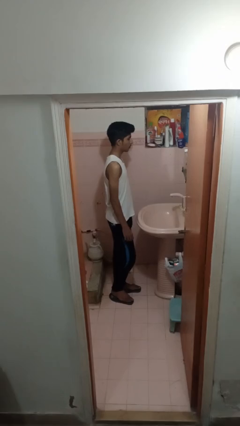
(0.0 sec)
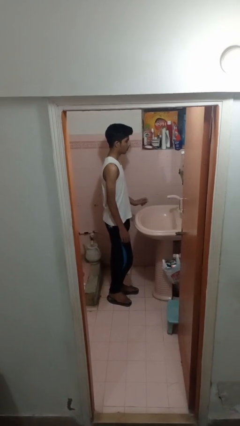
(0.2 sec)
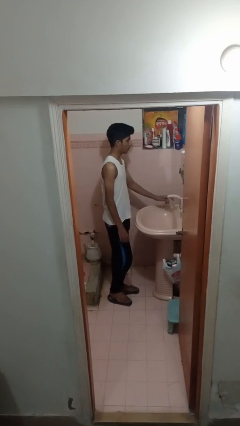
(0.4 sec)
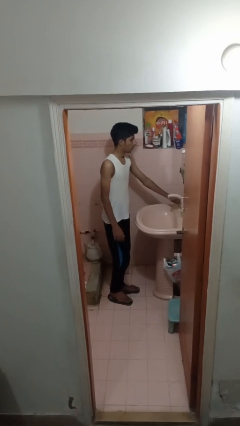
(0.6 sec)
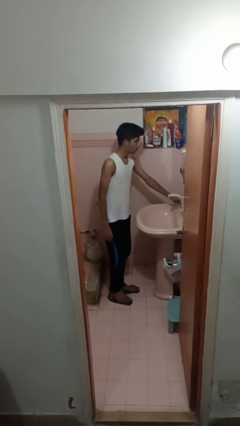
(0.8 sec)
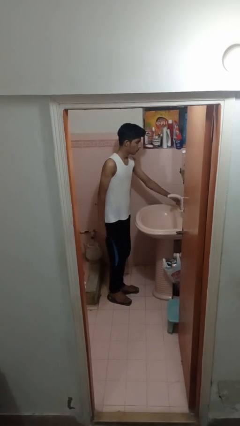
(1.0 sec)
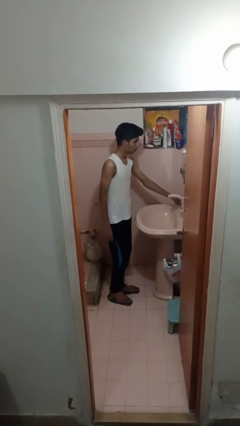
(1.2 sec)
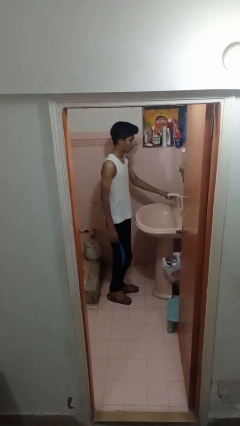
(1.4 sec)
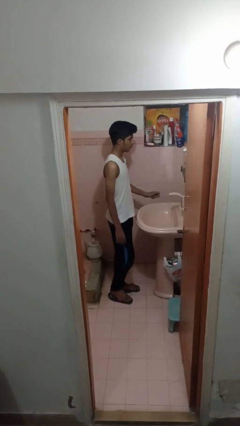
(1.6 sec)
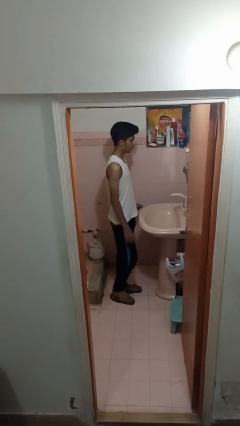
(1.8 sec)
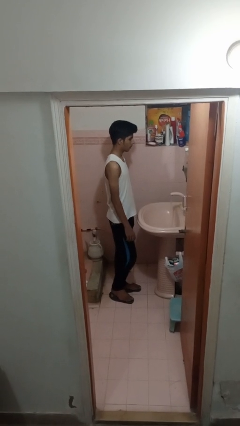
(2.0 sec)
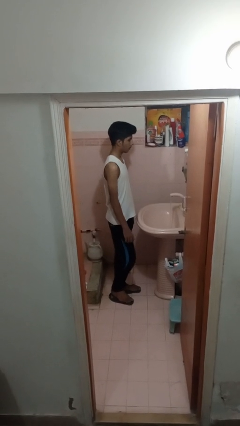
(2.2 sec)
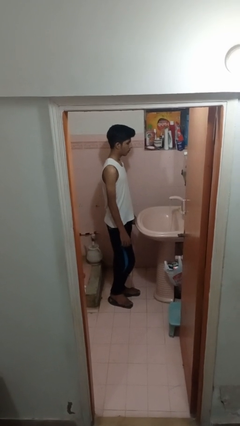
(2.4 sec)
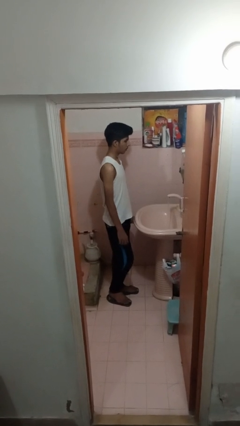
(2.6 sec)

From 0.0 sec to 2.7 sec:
person turns on faucet

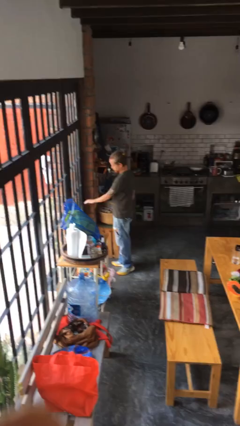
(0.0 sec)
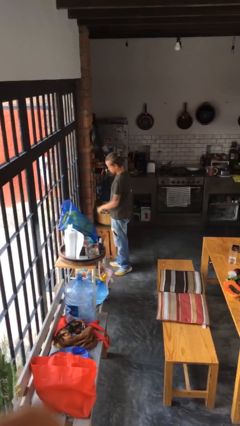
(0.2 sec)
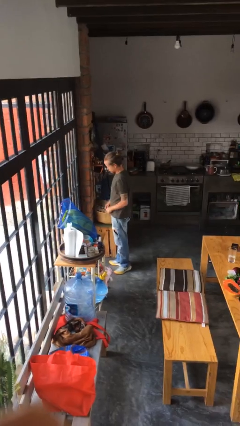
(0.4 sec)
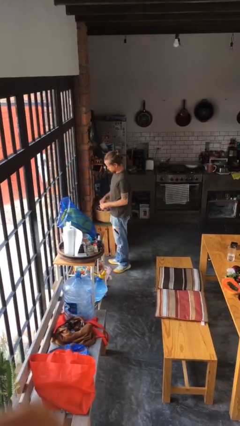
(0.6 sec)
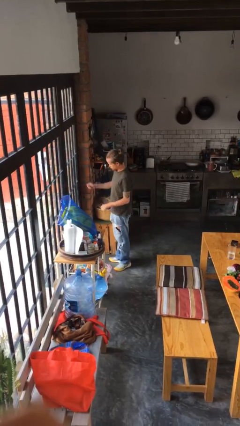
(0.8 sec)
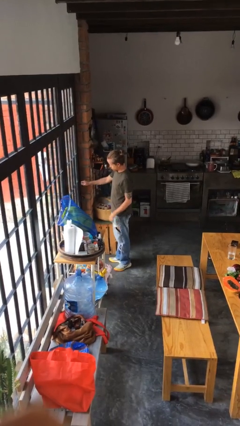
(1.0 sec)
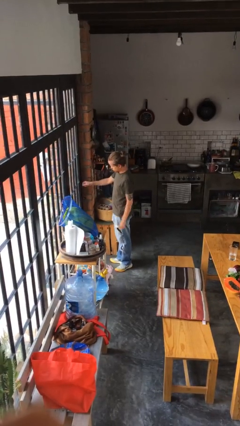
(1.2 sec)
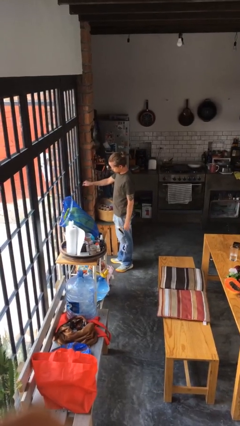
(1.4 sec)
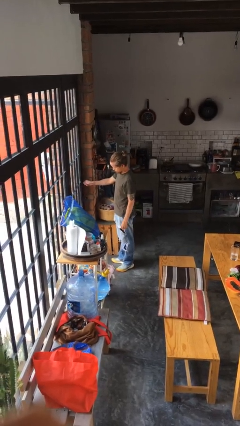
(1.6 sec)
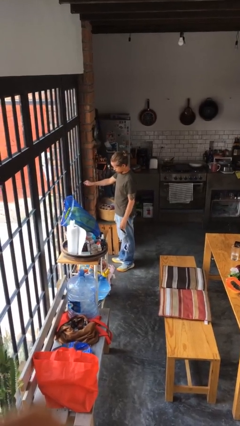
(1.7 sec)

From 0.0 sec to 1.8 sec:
person locks door with keys

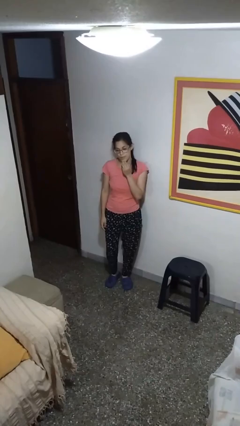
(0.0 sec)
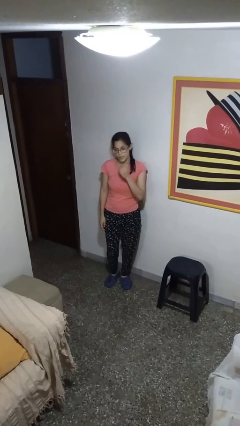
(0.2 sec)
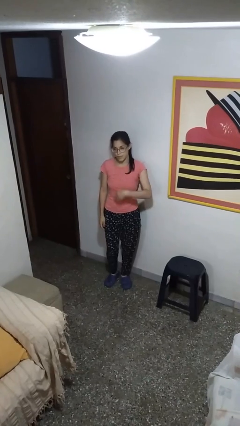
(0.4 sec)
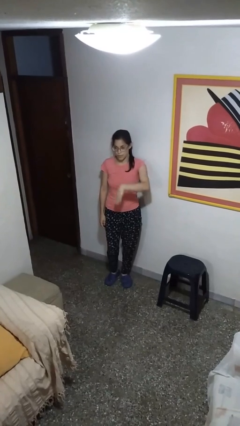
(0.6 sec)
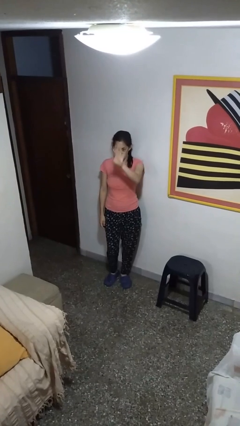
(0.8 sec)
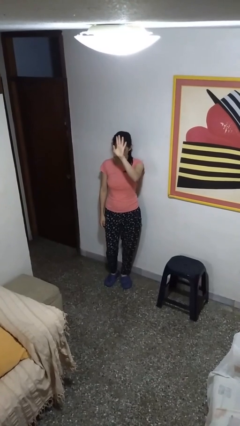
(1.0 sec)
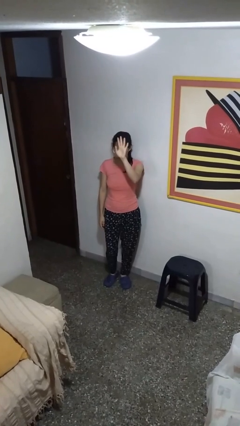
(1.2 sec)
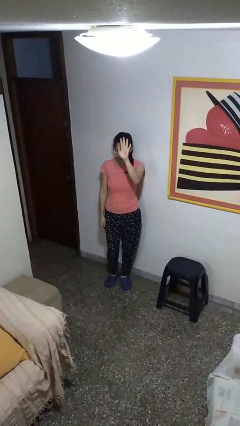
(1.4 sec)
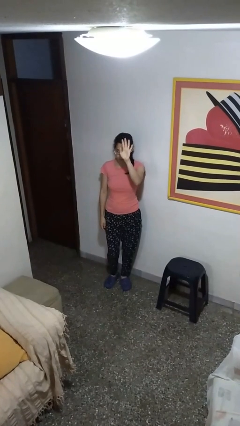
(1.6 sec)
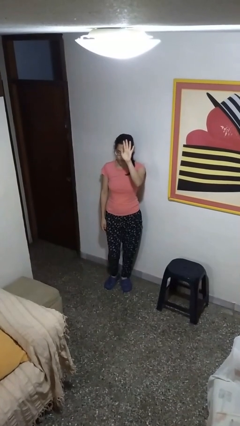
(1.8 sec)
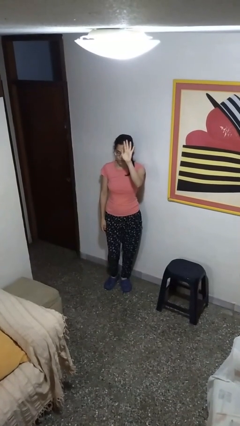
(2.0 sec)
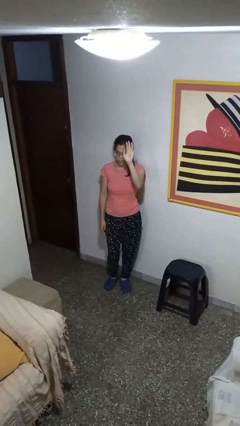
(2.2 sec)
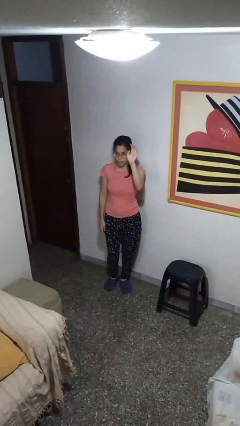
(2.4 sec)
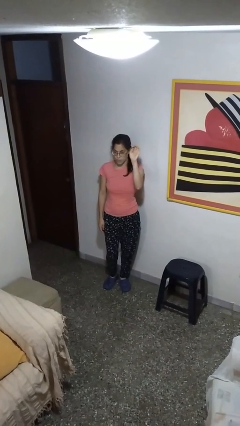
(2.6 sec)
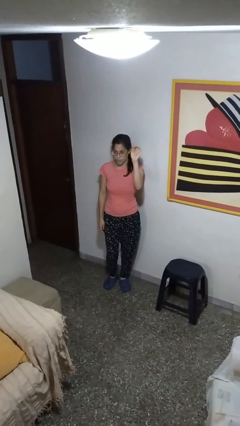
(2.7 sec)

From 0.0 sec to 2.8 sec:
person gestures swipe up

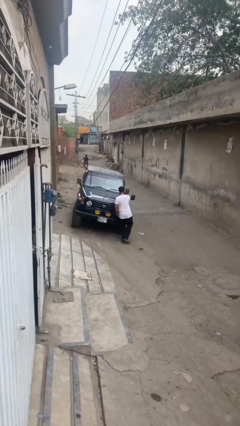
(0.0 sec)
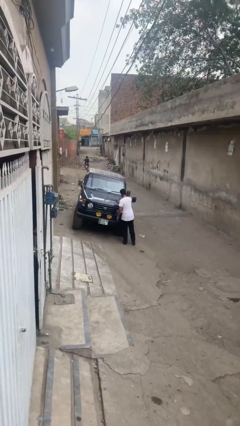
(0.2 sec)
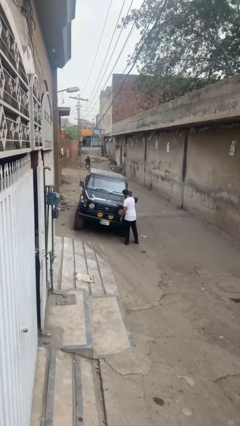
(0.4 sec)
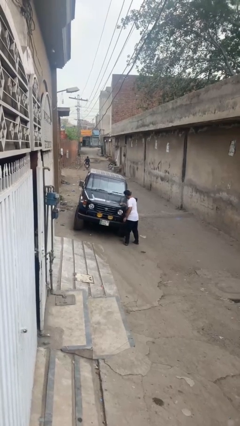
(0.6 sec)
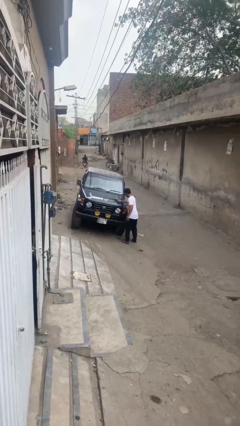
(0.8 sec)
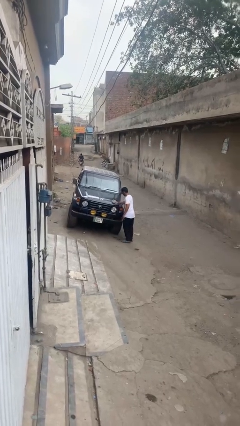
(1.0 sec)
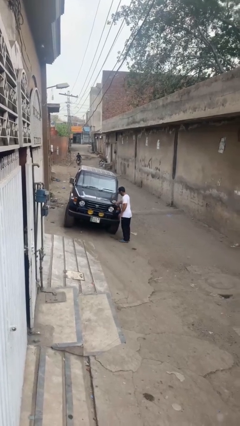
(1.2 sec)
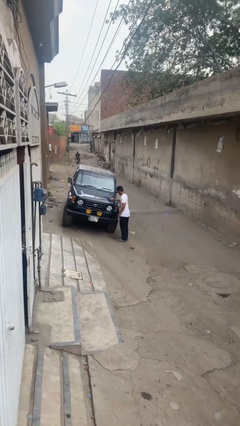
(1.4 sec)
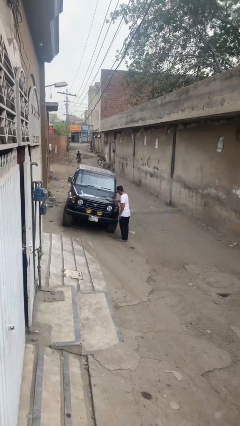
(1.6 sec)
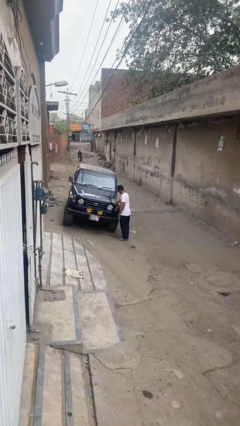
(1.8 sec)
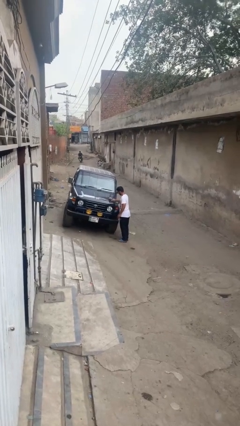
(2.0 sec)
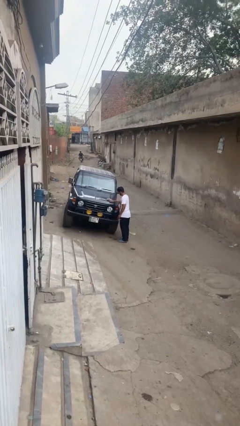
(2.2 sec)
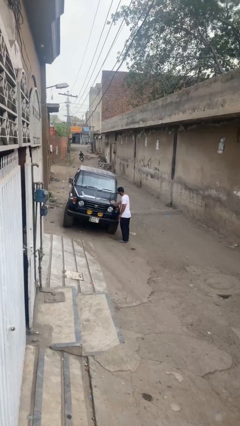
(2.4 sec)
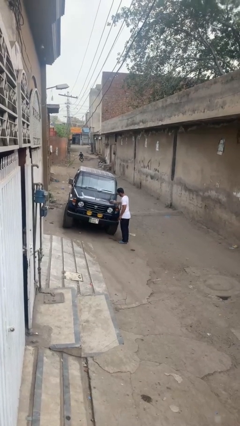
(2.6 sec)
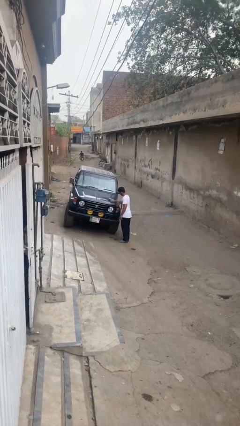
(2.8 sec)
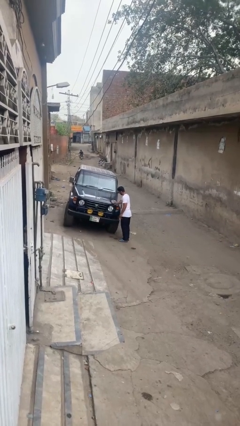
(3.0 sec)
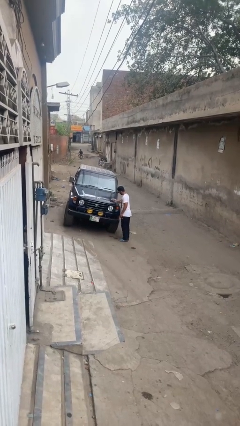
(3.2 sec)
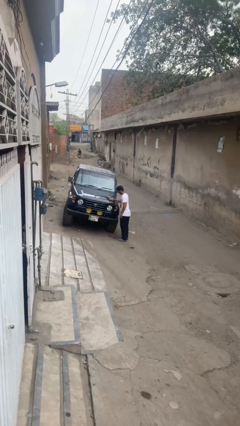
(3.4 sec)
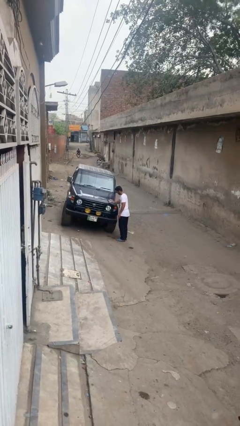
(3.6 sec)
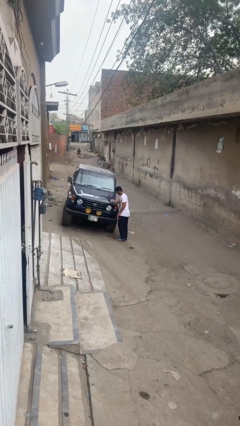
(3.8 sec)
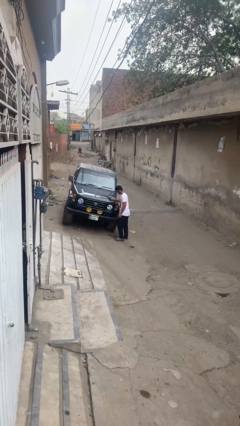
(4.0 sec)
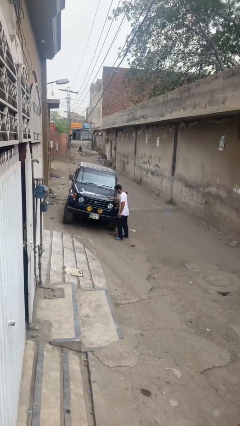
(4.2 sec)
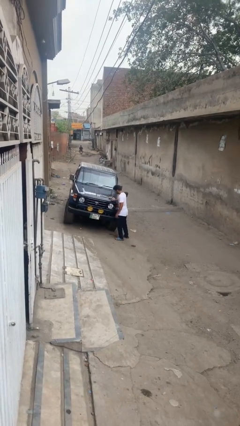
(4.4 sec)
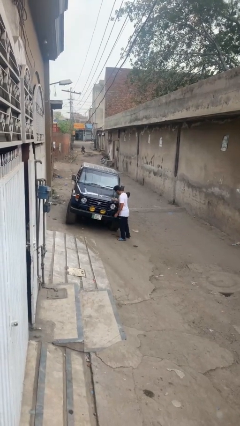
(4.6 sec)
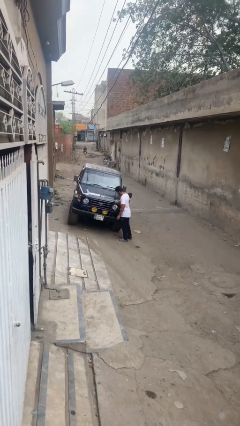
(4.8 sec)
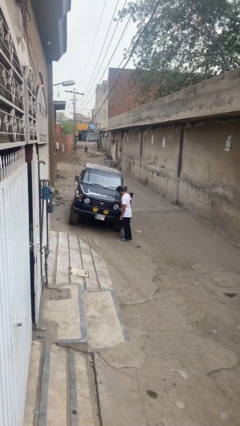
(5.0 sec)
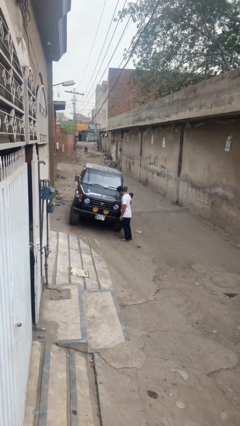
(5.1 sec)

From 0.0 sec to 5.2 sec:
person polishes car with rag

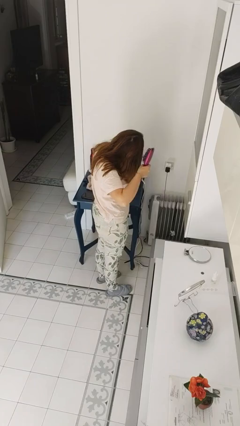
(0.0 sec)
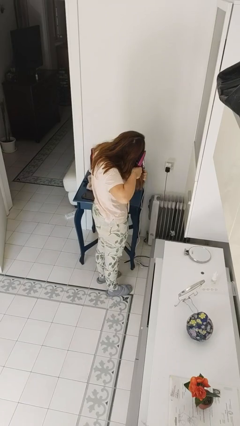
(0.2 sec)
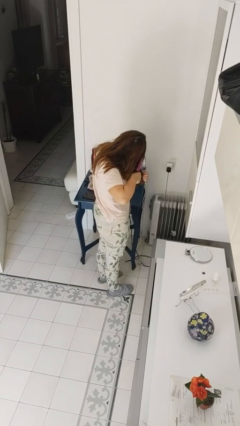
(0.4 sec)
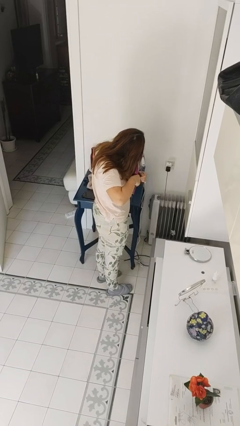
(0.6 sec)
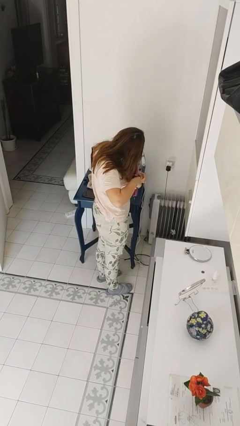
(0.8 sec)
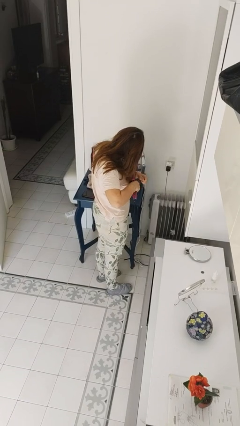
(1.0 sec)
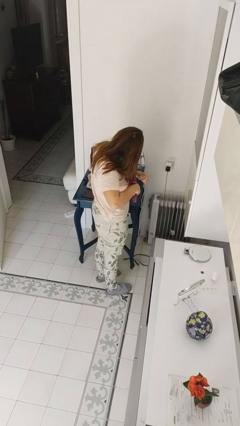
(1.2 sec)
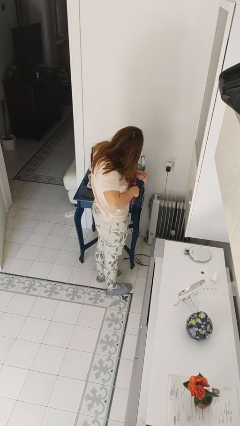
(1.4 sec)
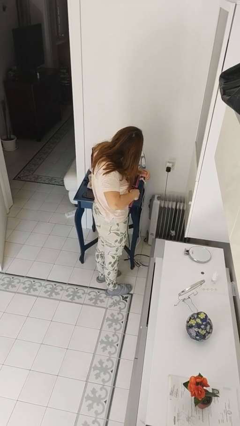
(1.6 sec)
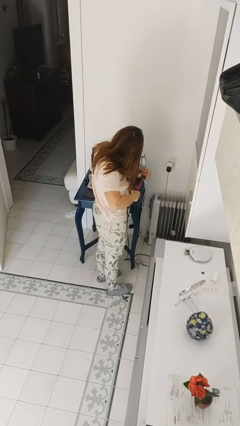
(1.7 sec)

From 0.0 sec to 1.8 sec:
person dries hair with hairdryer

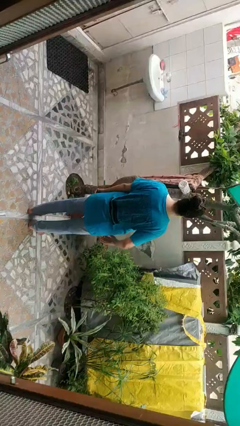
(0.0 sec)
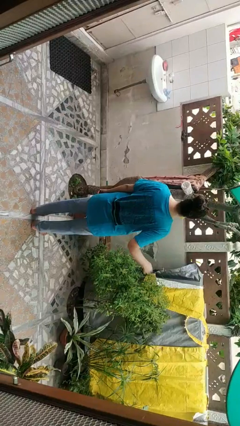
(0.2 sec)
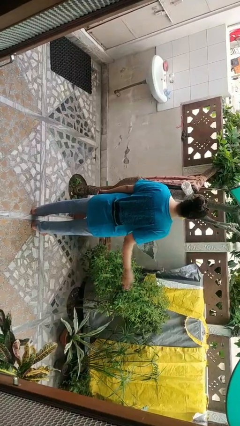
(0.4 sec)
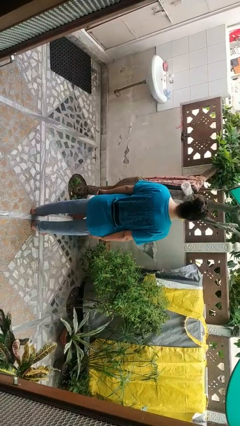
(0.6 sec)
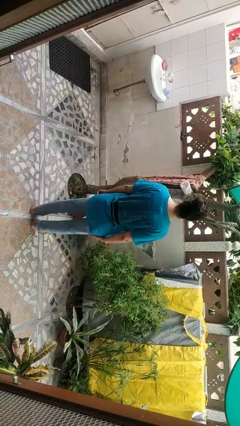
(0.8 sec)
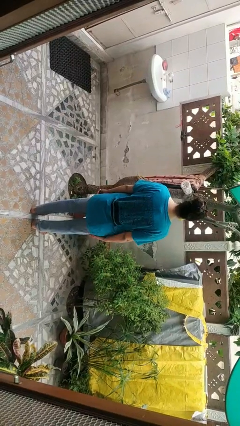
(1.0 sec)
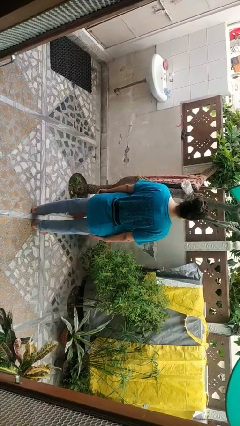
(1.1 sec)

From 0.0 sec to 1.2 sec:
person slaps hands on thighs

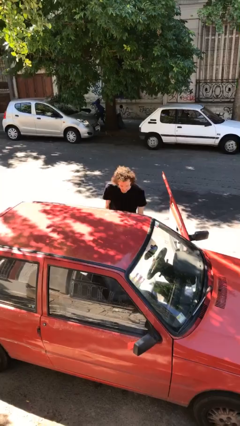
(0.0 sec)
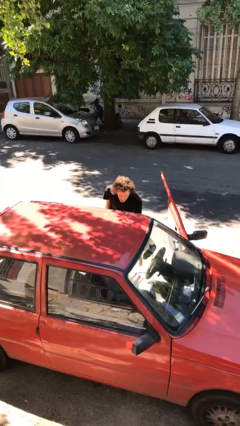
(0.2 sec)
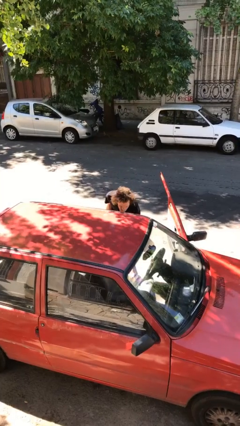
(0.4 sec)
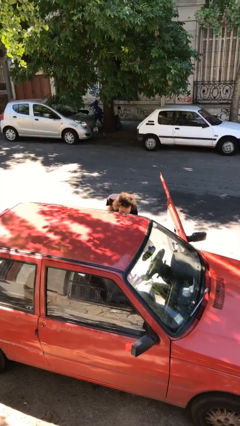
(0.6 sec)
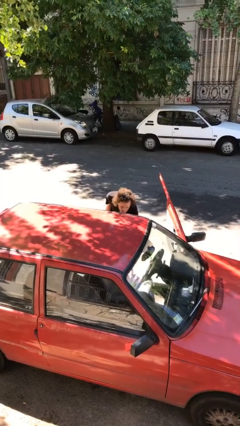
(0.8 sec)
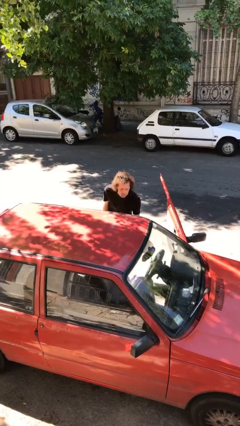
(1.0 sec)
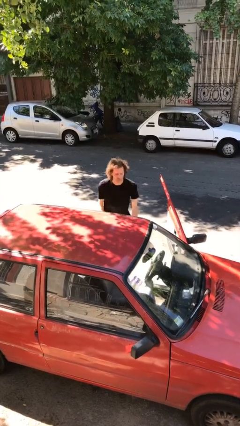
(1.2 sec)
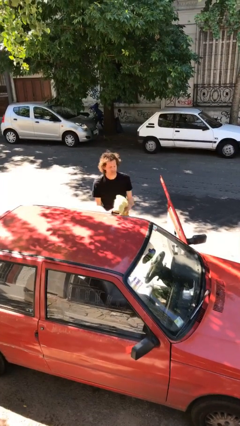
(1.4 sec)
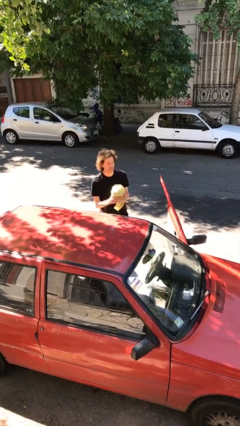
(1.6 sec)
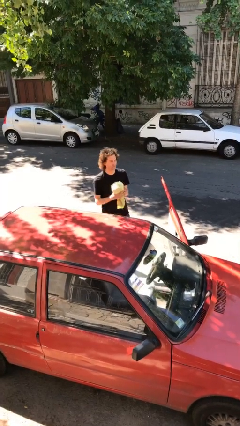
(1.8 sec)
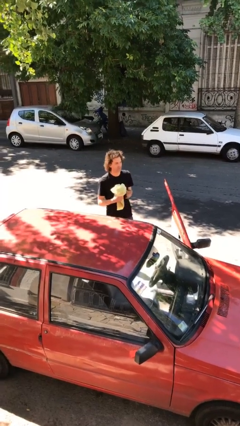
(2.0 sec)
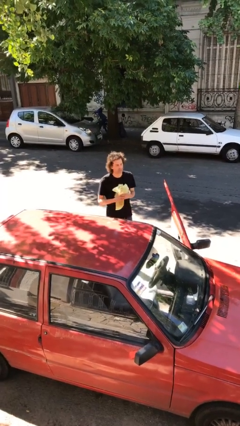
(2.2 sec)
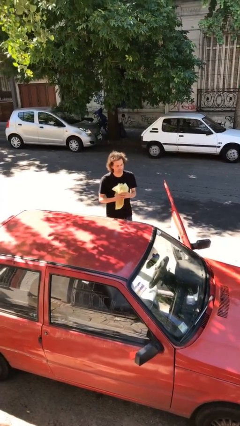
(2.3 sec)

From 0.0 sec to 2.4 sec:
person unloads car
